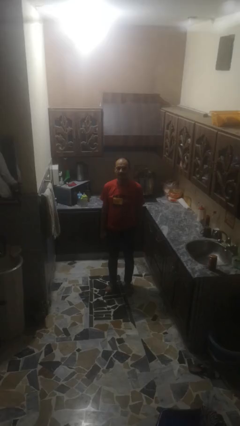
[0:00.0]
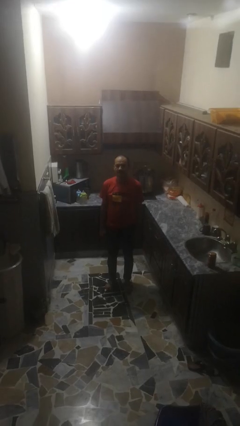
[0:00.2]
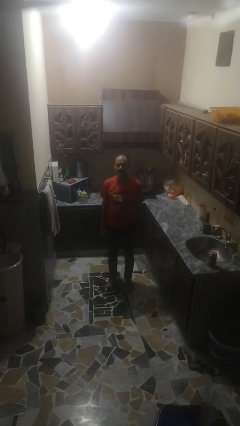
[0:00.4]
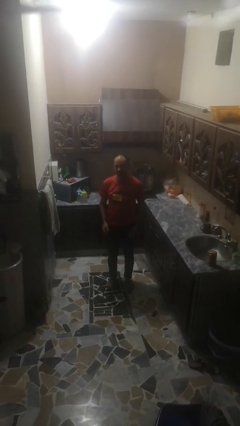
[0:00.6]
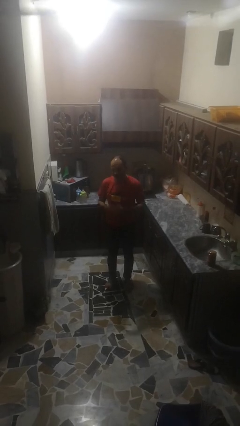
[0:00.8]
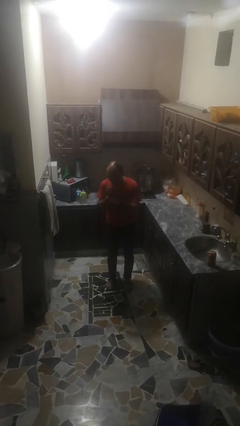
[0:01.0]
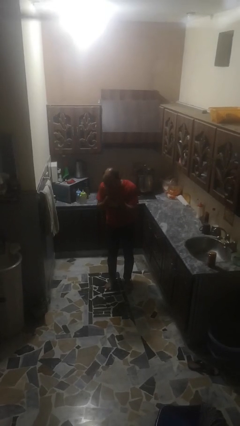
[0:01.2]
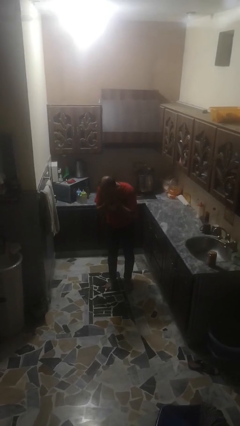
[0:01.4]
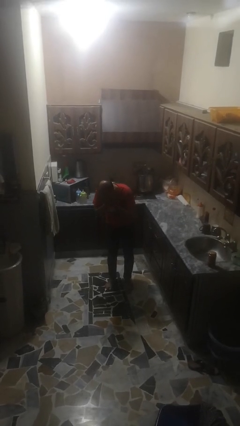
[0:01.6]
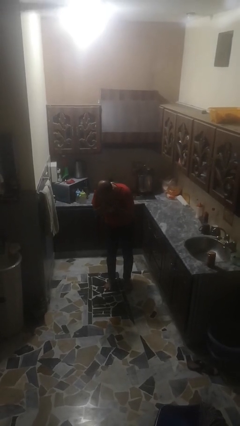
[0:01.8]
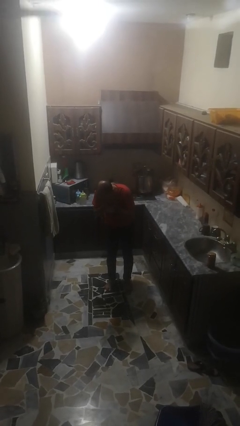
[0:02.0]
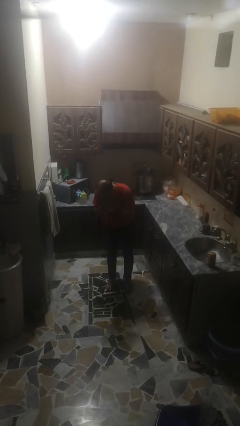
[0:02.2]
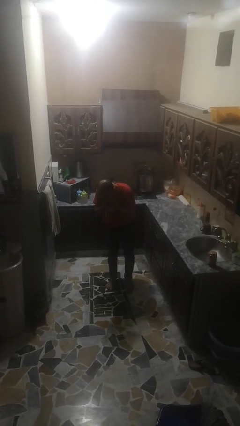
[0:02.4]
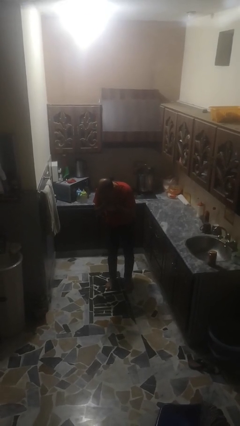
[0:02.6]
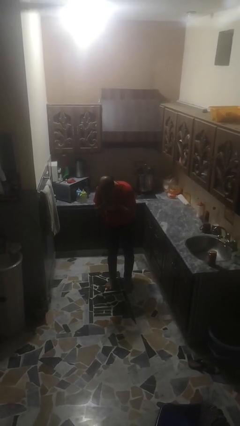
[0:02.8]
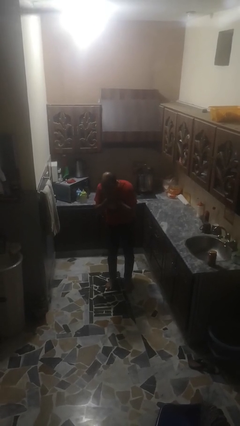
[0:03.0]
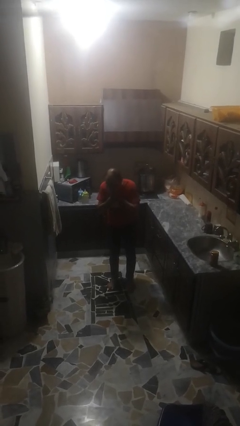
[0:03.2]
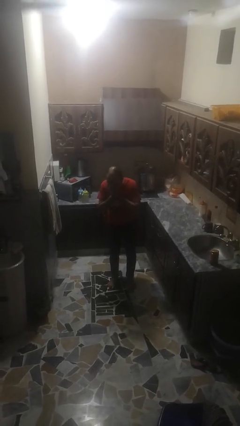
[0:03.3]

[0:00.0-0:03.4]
person sneezes into hand

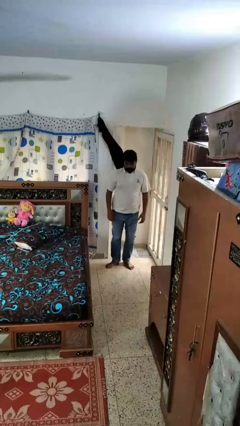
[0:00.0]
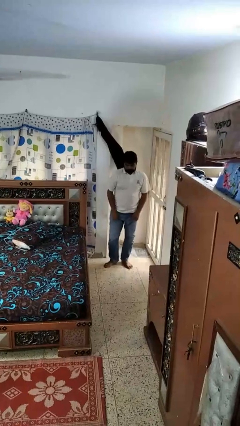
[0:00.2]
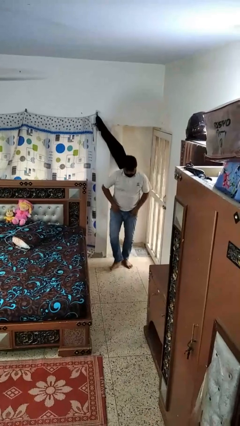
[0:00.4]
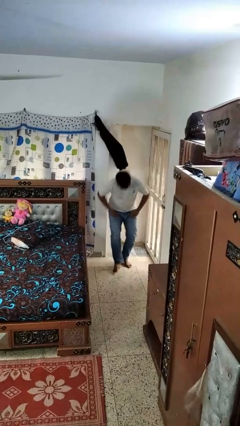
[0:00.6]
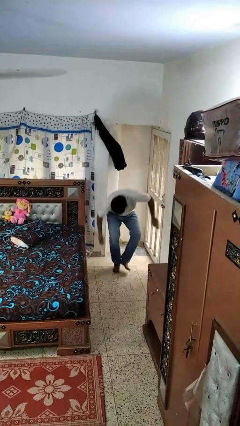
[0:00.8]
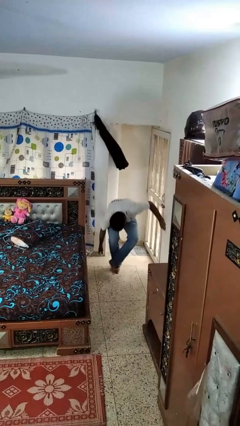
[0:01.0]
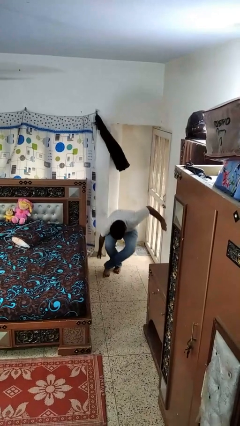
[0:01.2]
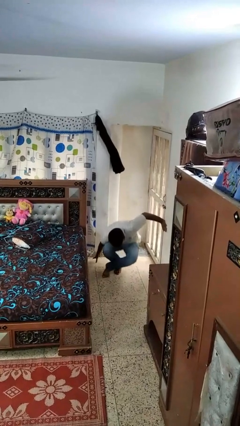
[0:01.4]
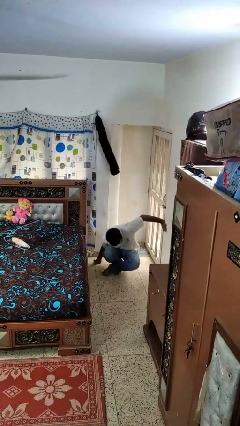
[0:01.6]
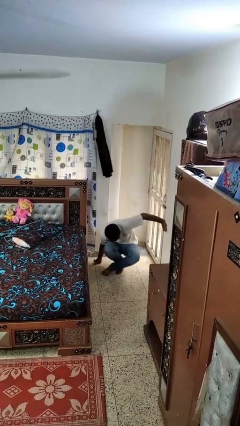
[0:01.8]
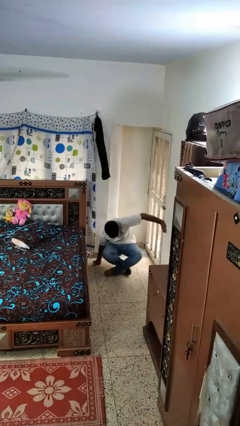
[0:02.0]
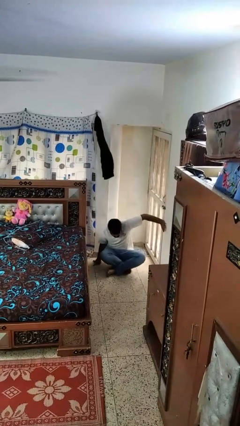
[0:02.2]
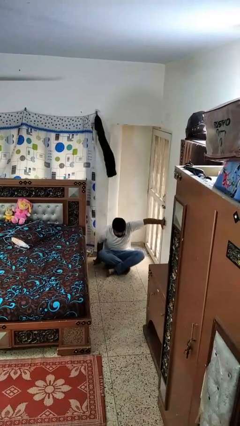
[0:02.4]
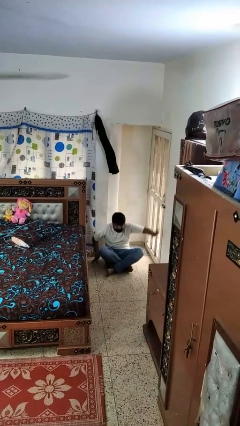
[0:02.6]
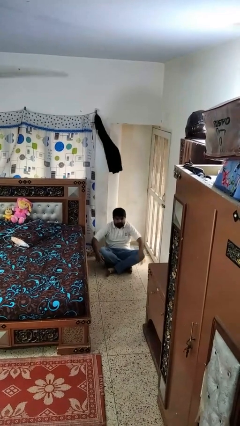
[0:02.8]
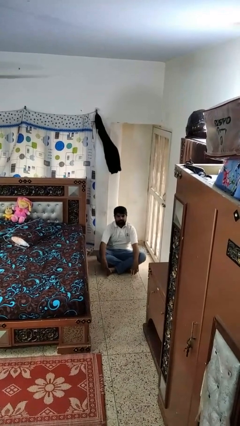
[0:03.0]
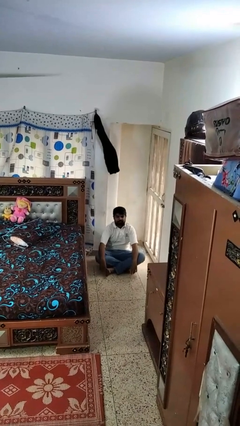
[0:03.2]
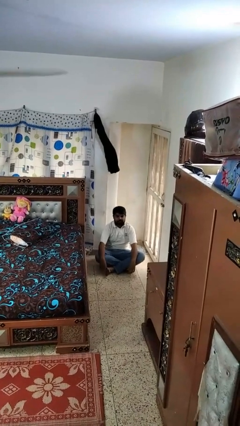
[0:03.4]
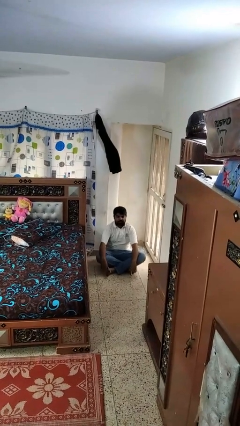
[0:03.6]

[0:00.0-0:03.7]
person sits crisscross

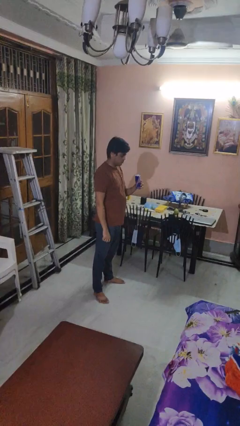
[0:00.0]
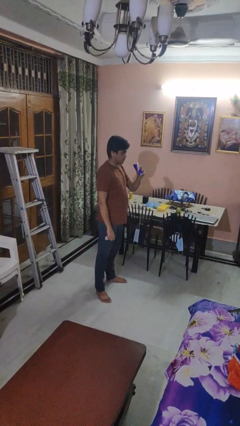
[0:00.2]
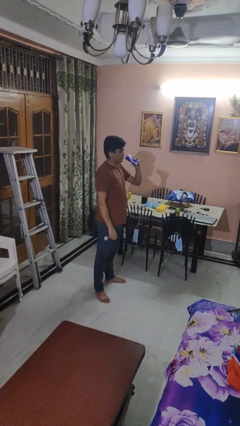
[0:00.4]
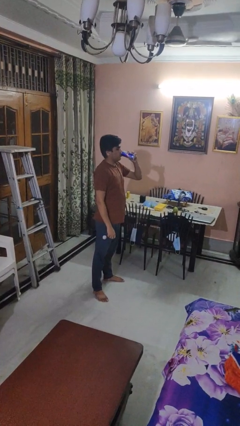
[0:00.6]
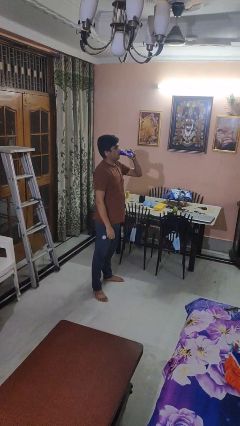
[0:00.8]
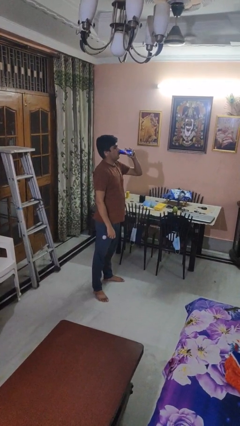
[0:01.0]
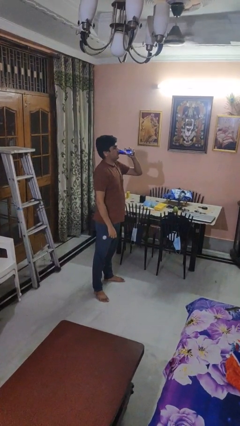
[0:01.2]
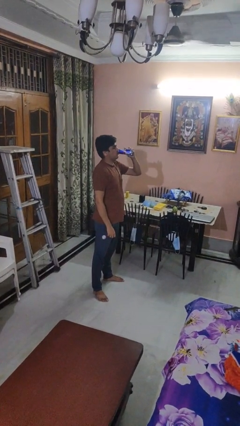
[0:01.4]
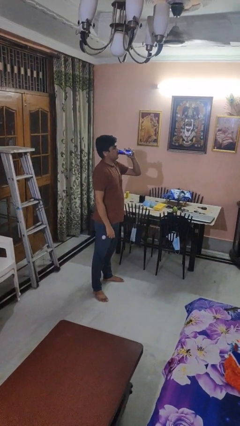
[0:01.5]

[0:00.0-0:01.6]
person drinks from beverage can

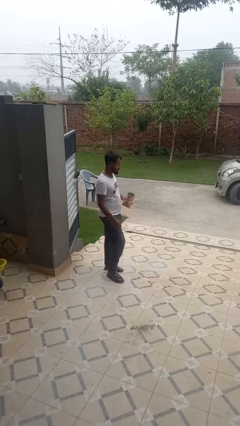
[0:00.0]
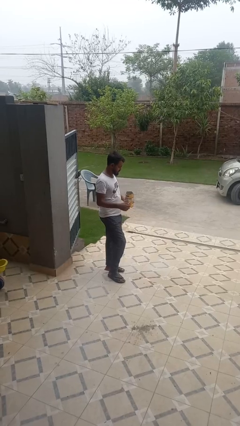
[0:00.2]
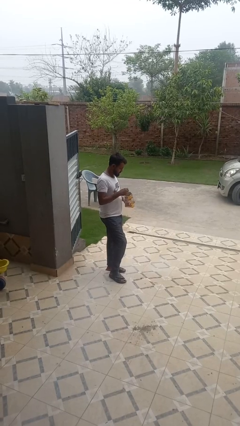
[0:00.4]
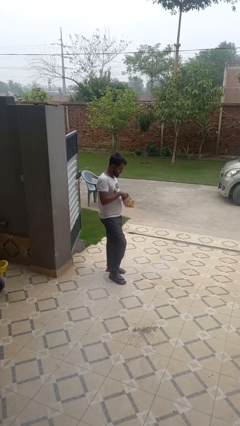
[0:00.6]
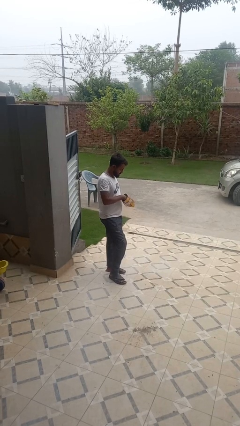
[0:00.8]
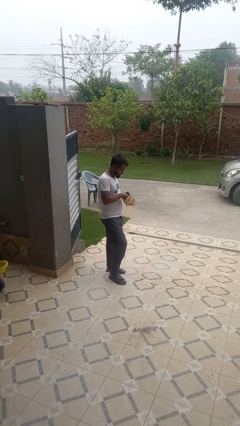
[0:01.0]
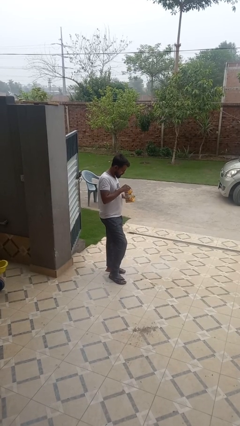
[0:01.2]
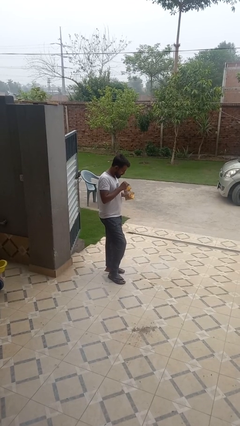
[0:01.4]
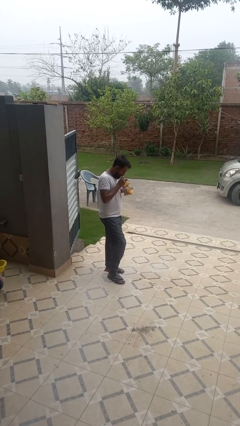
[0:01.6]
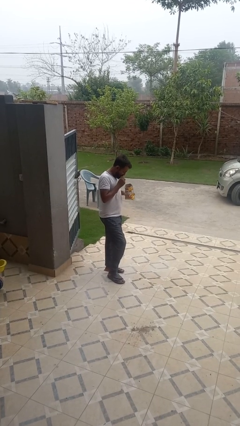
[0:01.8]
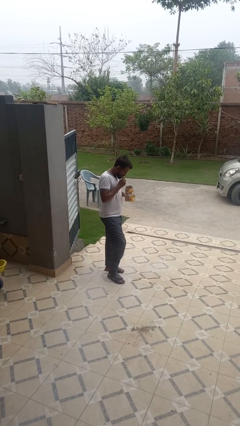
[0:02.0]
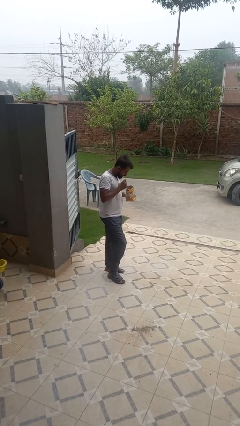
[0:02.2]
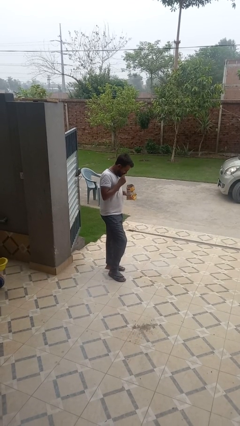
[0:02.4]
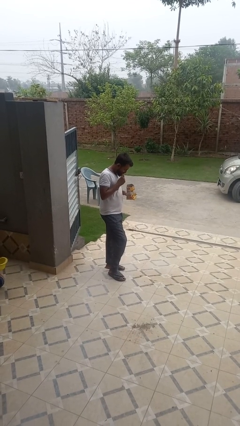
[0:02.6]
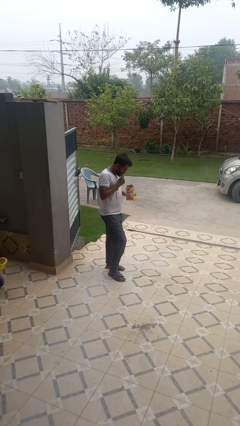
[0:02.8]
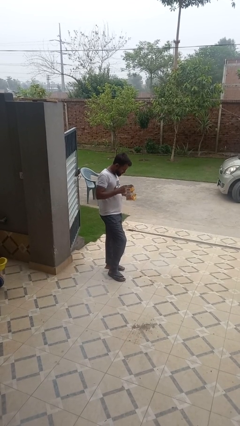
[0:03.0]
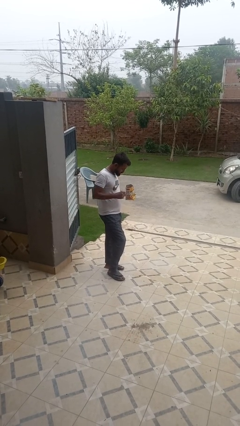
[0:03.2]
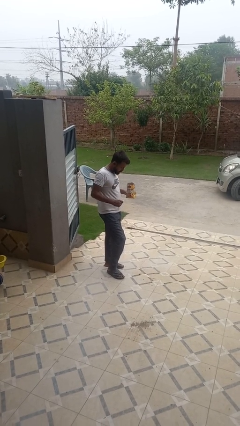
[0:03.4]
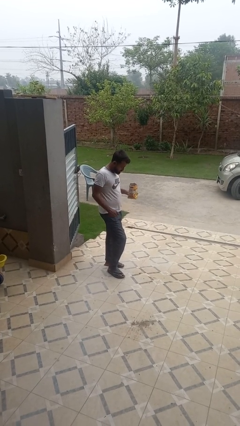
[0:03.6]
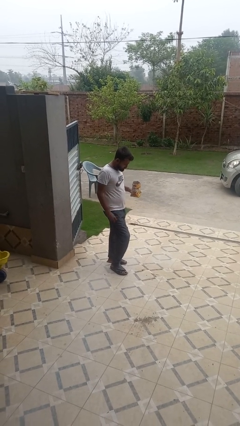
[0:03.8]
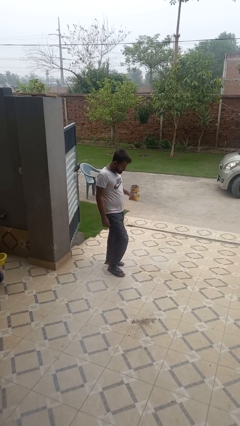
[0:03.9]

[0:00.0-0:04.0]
person eats snack from bag

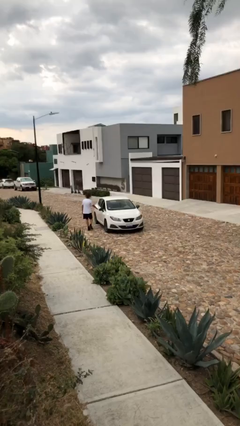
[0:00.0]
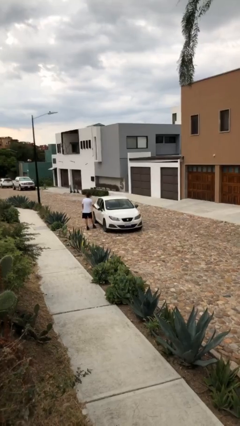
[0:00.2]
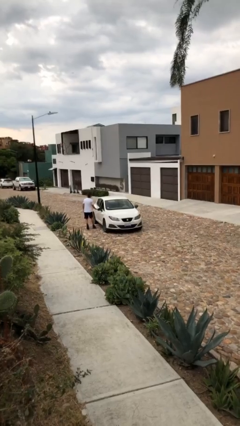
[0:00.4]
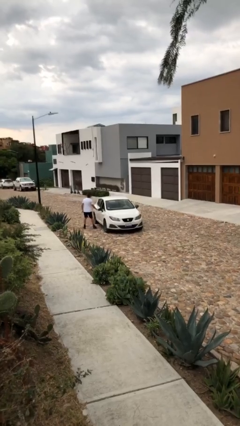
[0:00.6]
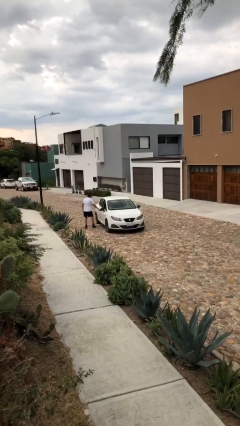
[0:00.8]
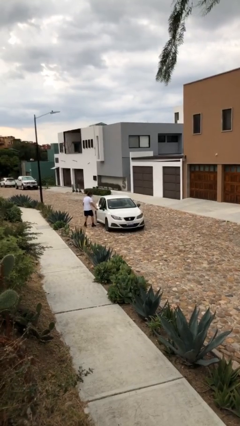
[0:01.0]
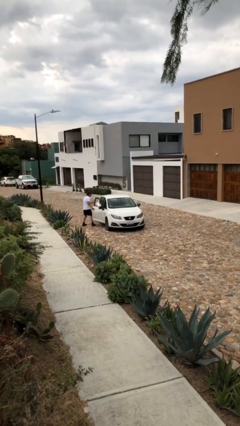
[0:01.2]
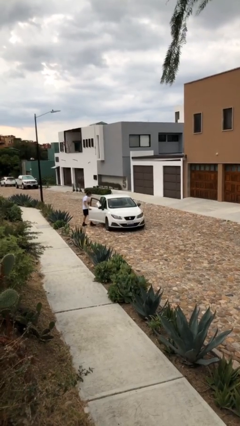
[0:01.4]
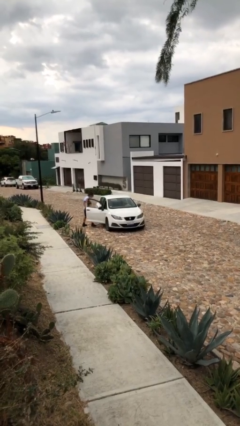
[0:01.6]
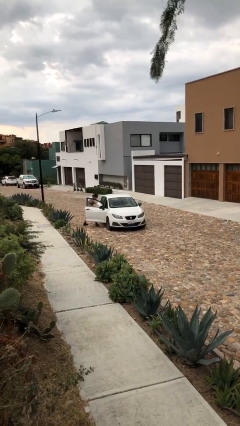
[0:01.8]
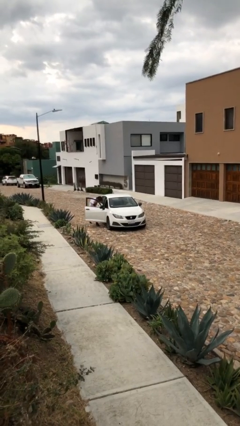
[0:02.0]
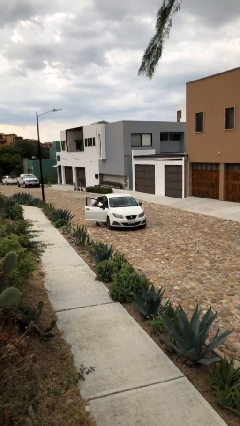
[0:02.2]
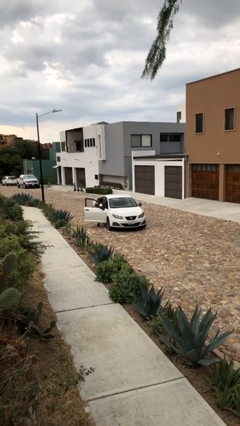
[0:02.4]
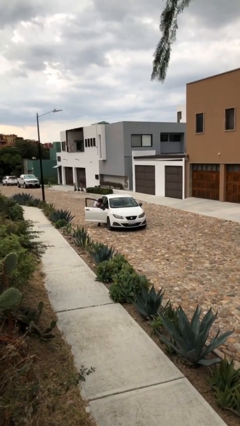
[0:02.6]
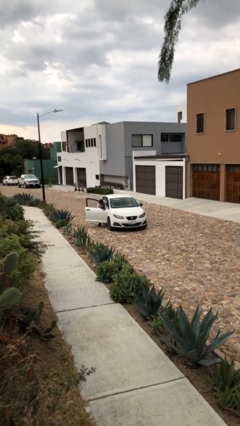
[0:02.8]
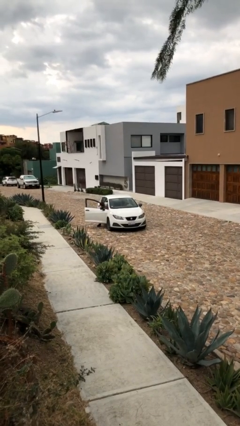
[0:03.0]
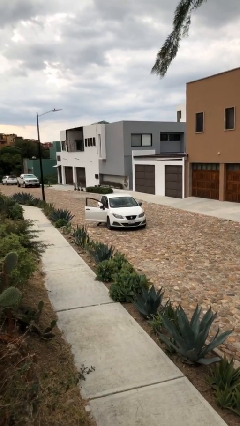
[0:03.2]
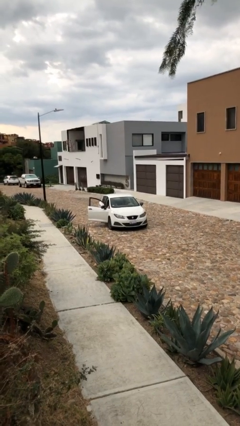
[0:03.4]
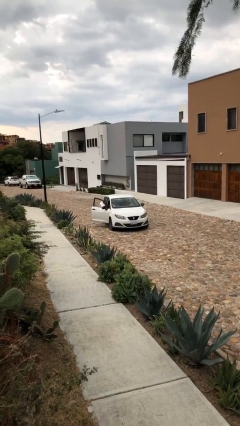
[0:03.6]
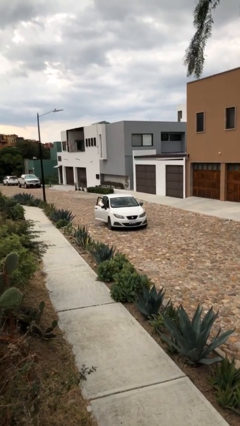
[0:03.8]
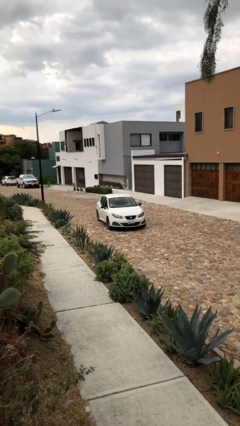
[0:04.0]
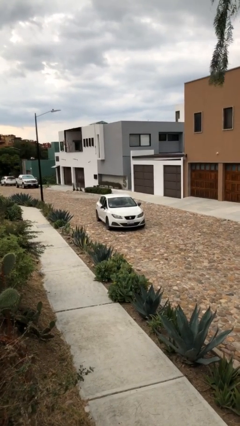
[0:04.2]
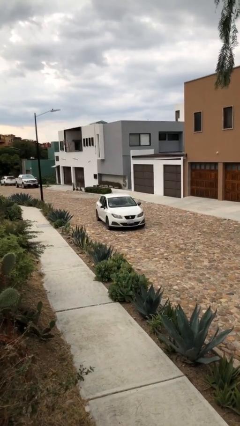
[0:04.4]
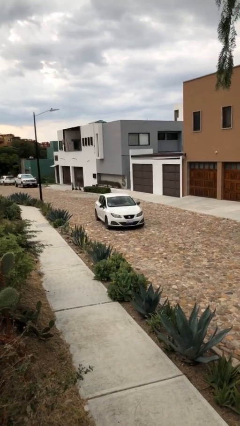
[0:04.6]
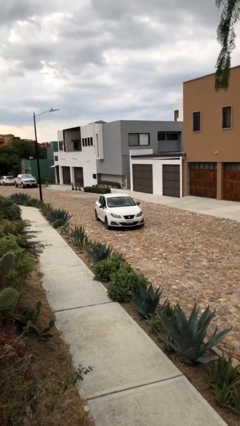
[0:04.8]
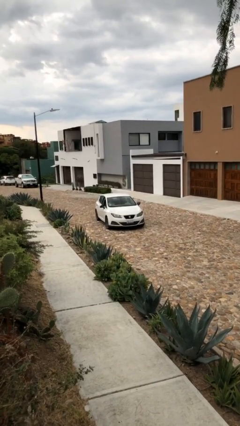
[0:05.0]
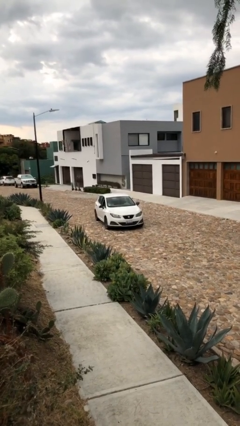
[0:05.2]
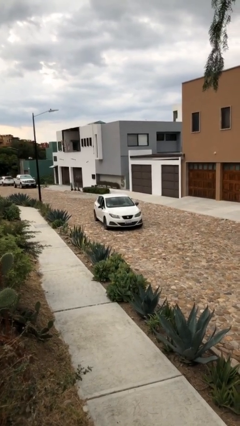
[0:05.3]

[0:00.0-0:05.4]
car picks up person
